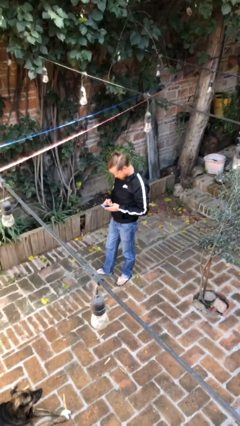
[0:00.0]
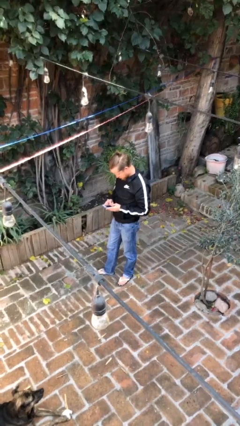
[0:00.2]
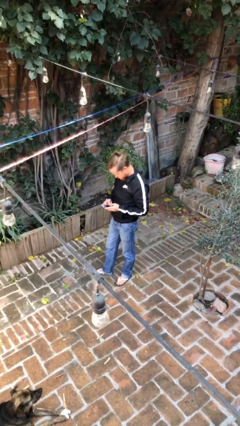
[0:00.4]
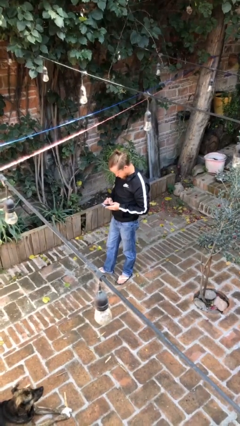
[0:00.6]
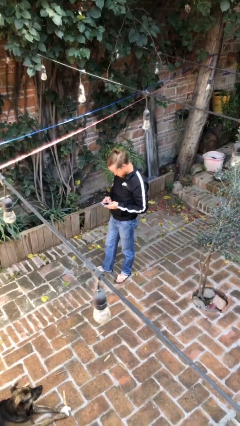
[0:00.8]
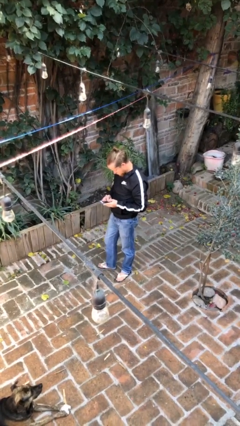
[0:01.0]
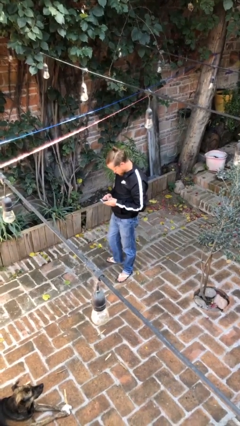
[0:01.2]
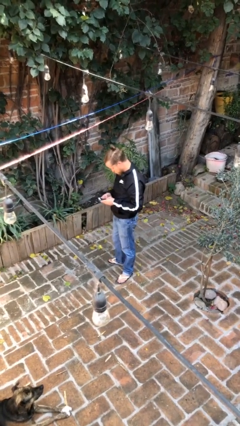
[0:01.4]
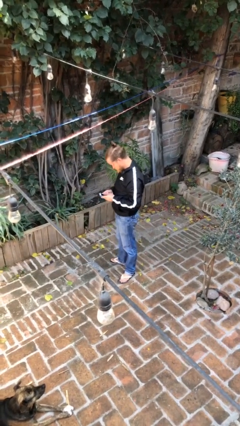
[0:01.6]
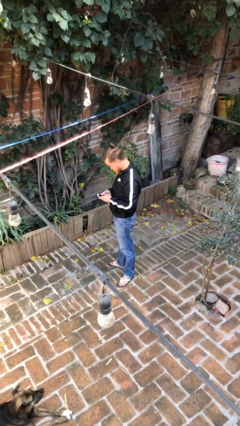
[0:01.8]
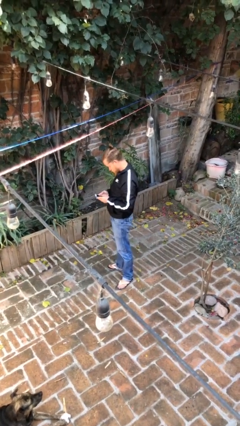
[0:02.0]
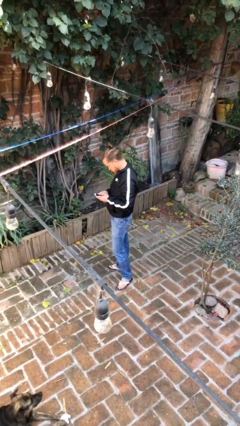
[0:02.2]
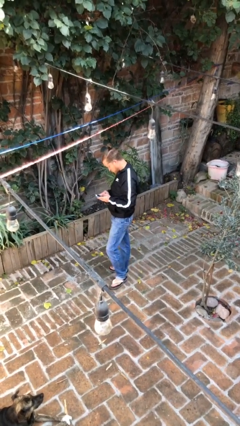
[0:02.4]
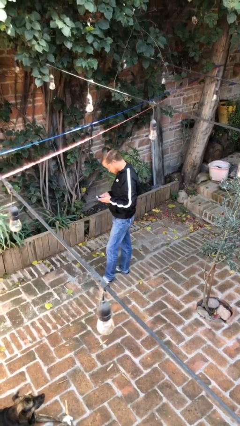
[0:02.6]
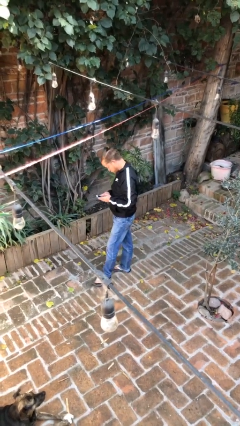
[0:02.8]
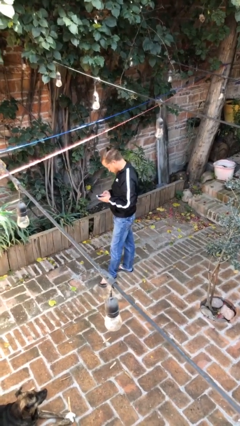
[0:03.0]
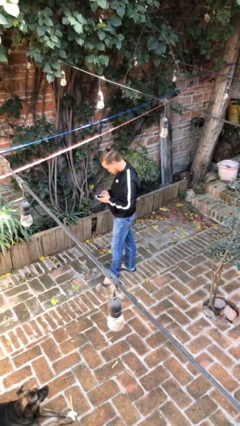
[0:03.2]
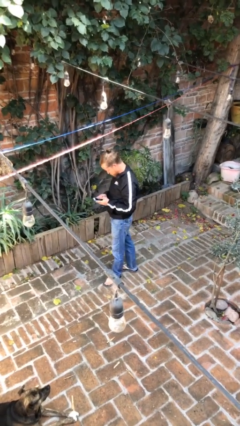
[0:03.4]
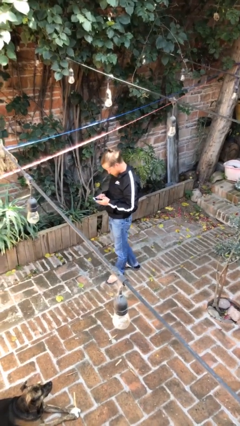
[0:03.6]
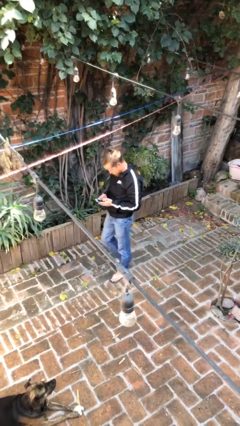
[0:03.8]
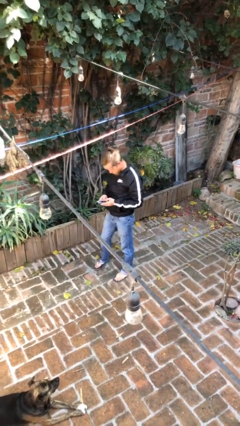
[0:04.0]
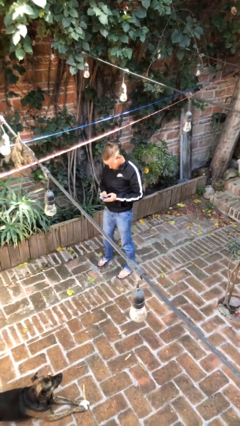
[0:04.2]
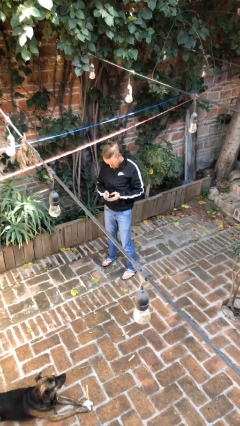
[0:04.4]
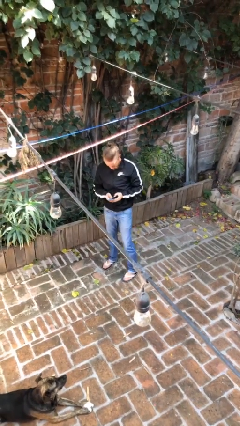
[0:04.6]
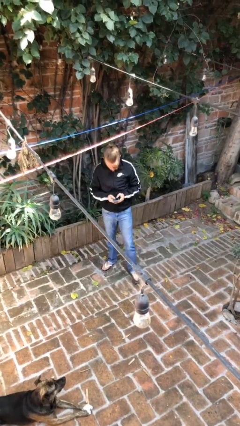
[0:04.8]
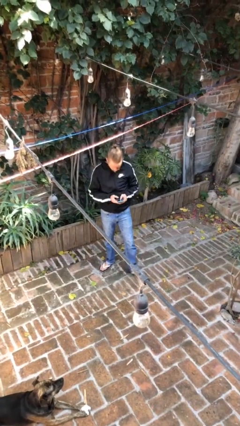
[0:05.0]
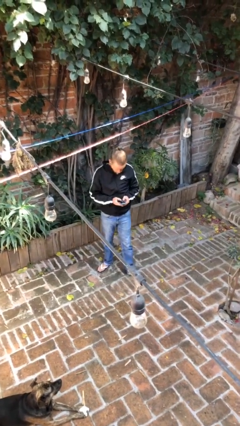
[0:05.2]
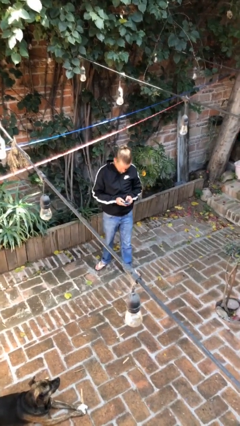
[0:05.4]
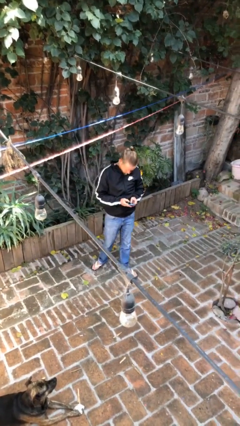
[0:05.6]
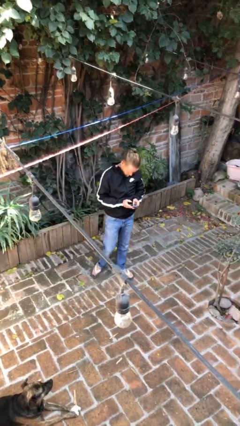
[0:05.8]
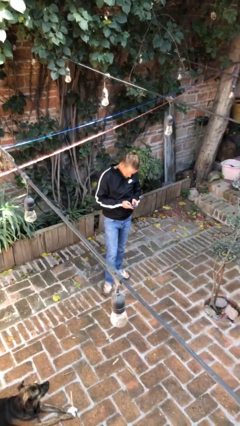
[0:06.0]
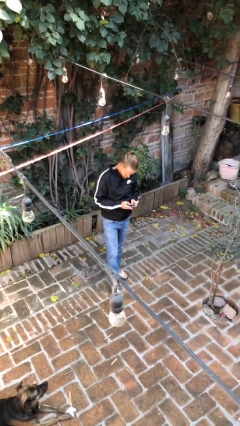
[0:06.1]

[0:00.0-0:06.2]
person texts on phone

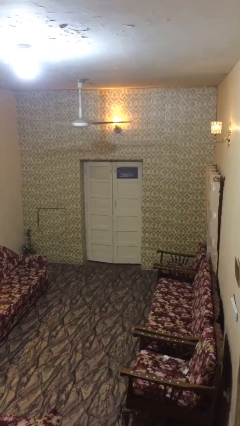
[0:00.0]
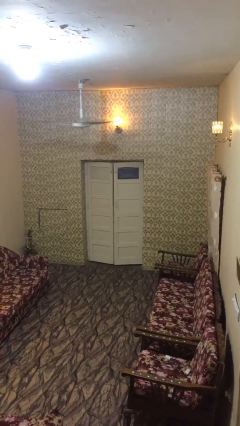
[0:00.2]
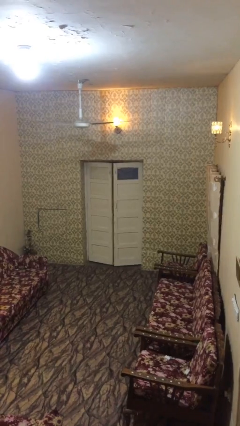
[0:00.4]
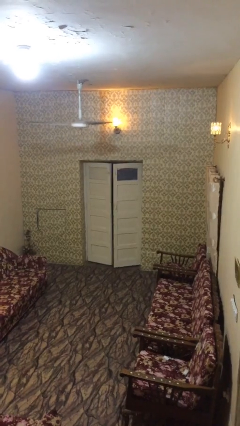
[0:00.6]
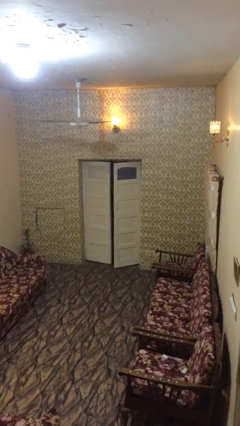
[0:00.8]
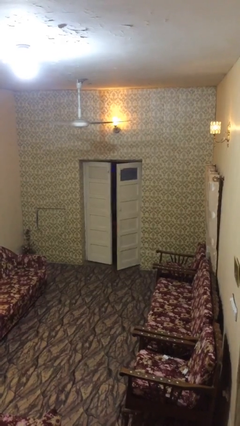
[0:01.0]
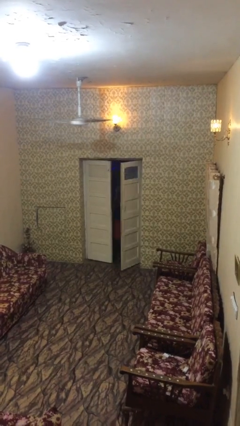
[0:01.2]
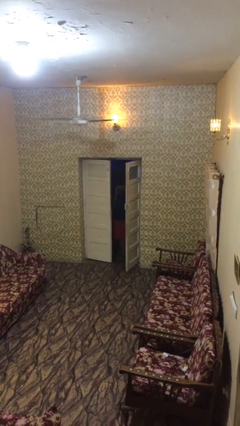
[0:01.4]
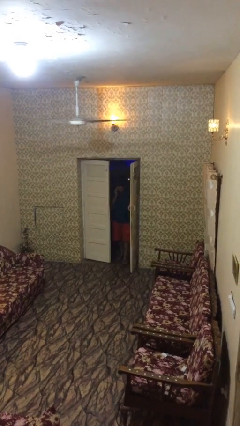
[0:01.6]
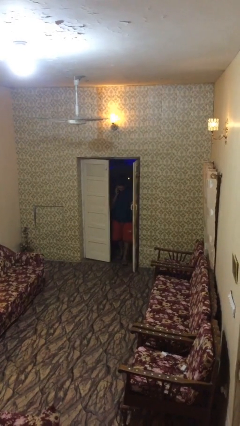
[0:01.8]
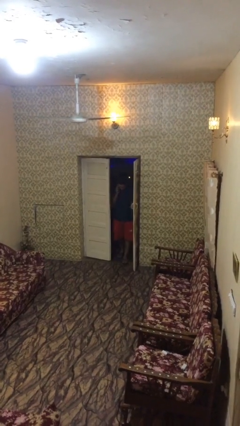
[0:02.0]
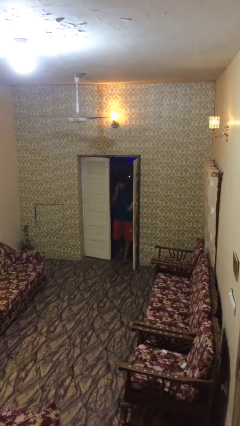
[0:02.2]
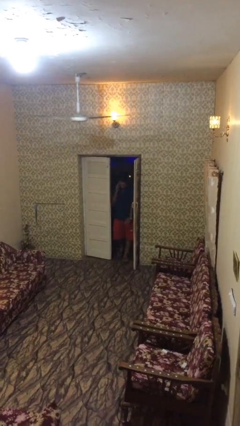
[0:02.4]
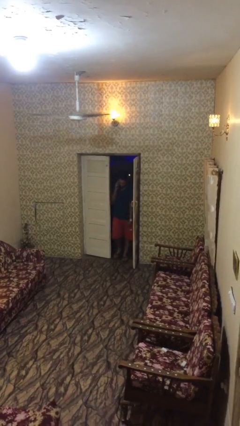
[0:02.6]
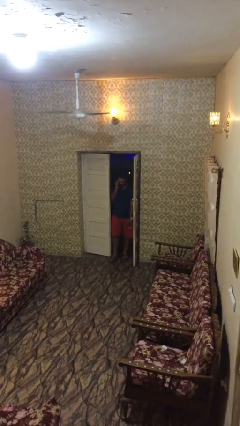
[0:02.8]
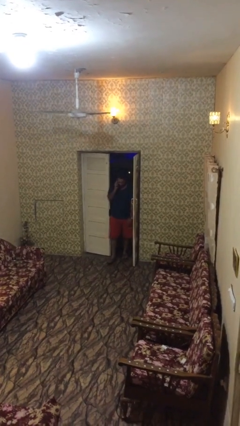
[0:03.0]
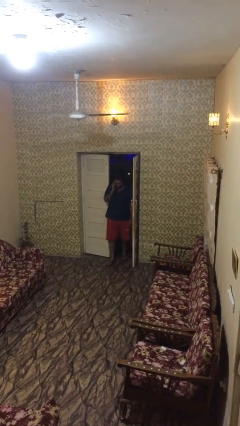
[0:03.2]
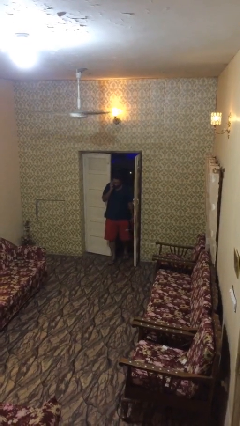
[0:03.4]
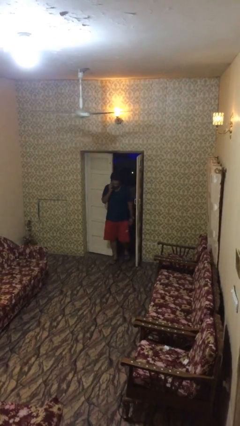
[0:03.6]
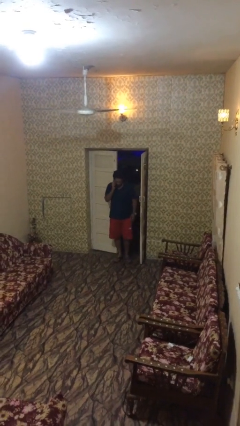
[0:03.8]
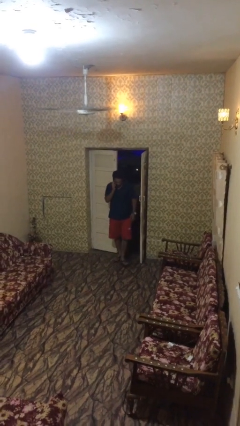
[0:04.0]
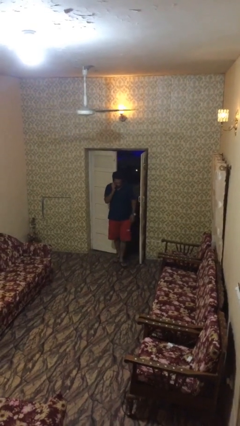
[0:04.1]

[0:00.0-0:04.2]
person opens facility door

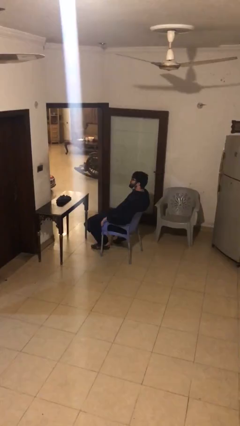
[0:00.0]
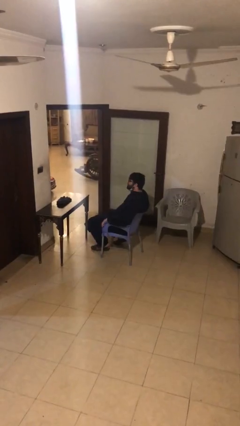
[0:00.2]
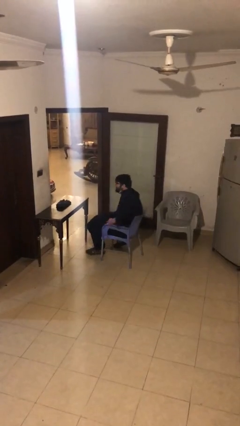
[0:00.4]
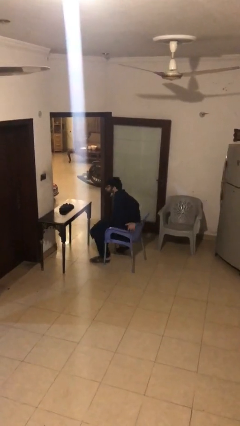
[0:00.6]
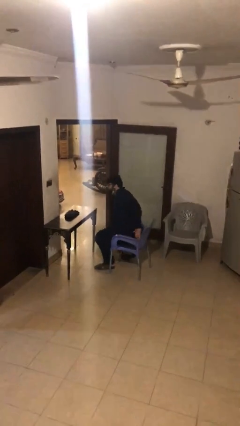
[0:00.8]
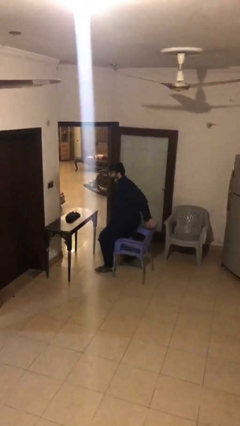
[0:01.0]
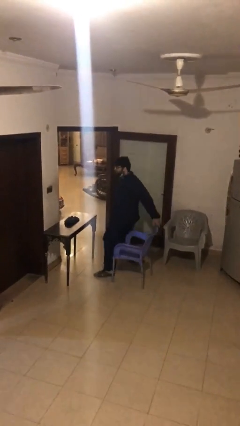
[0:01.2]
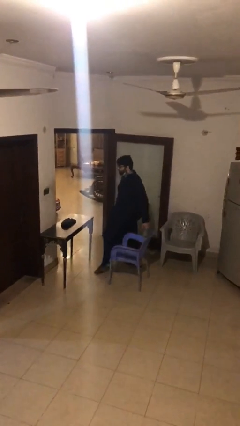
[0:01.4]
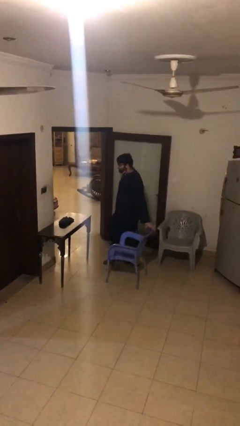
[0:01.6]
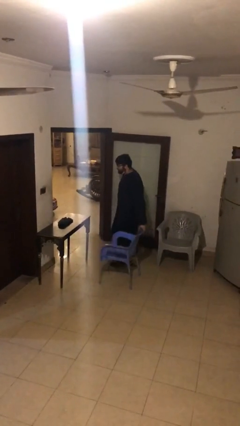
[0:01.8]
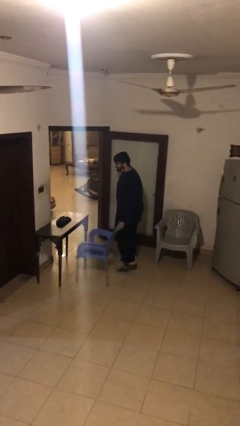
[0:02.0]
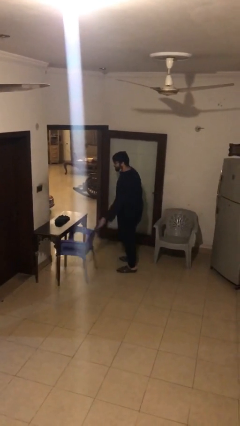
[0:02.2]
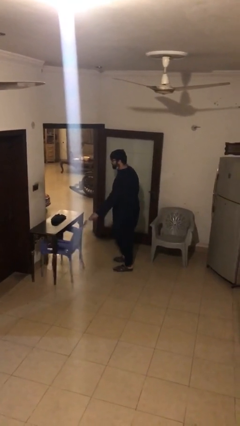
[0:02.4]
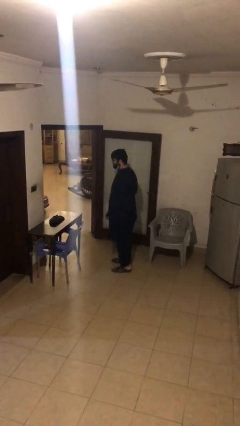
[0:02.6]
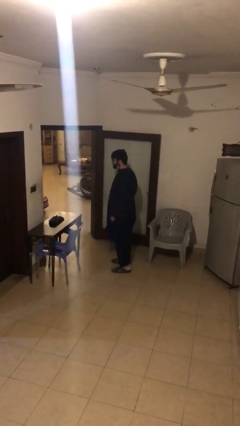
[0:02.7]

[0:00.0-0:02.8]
person stands up

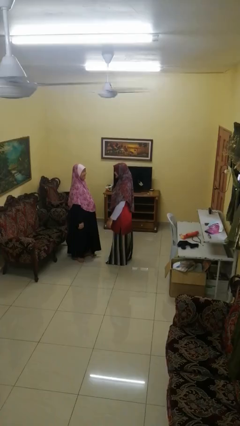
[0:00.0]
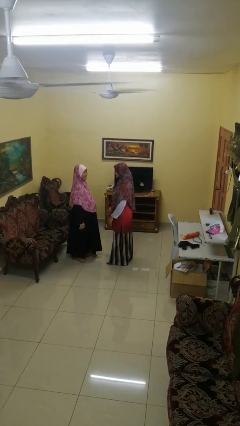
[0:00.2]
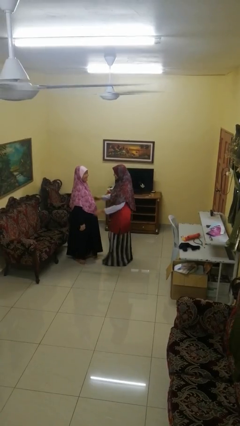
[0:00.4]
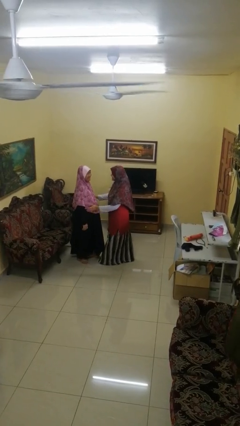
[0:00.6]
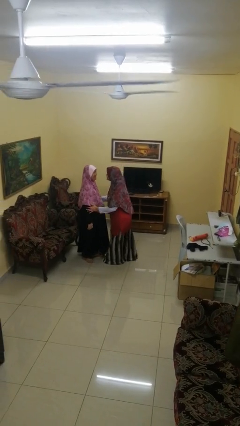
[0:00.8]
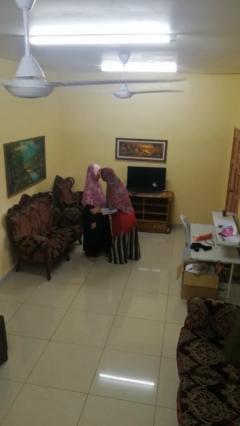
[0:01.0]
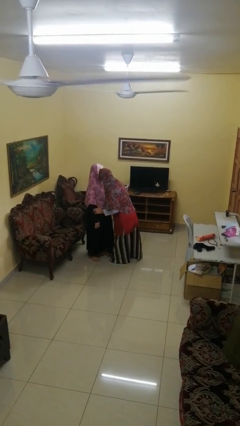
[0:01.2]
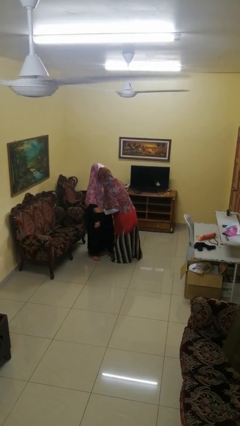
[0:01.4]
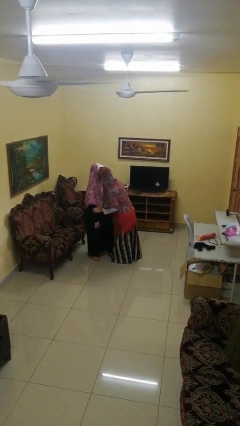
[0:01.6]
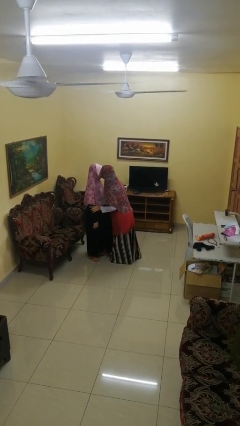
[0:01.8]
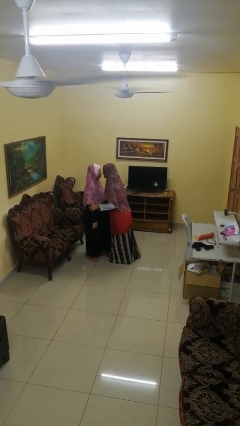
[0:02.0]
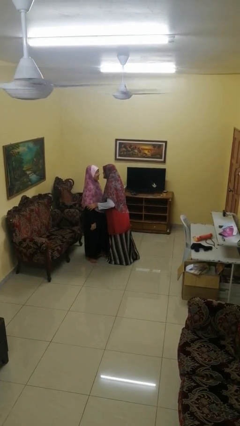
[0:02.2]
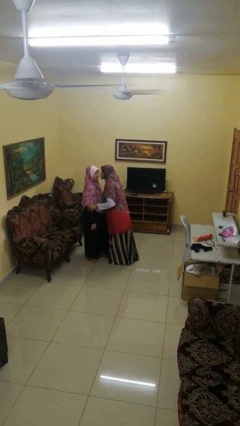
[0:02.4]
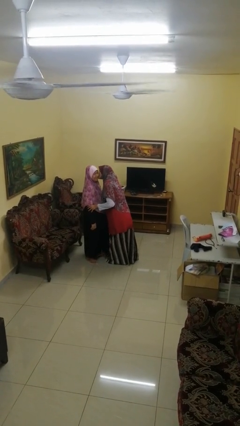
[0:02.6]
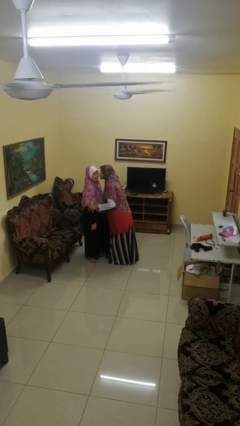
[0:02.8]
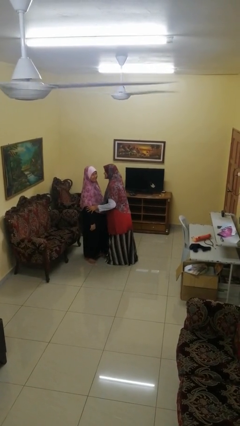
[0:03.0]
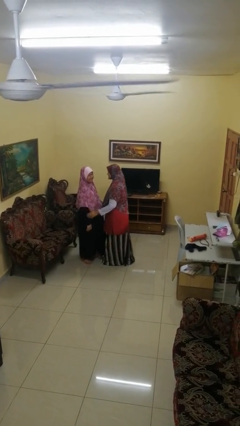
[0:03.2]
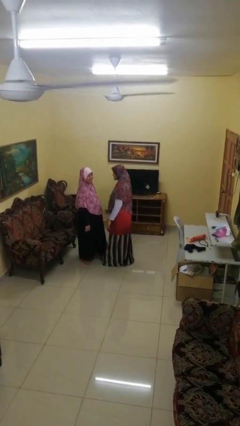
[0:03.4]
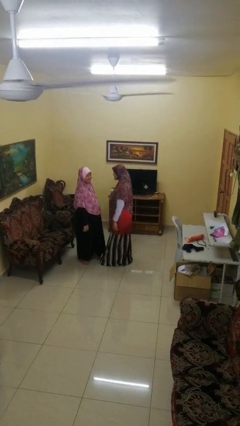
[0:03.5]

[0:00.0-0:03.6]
person kisses cheek of person

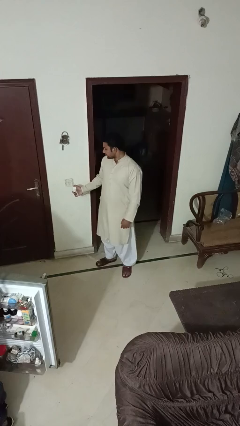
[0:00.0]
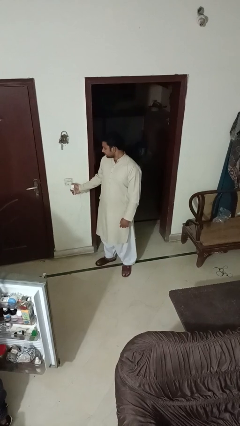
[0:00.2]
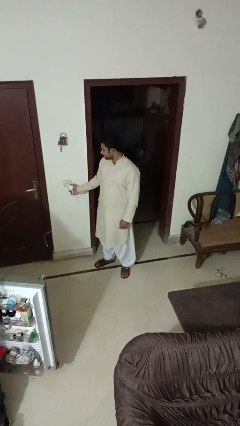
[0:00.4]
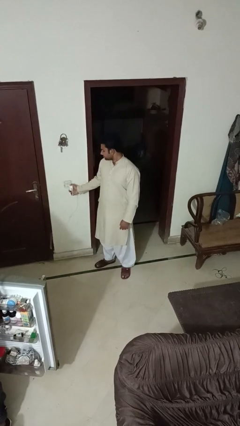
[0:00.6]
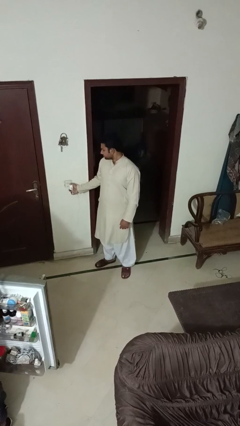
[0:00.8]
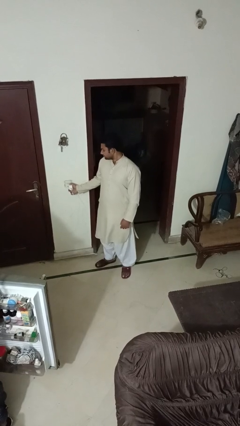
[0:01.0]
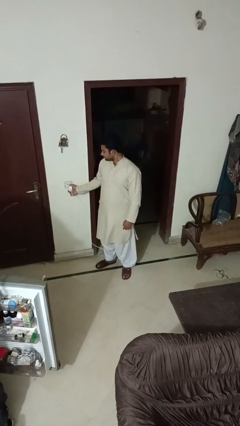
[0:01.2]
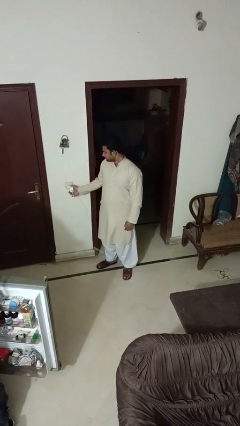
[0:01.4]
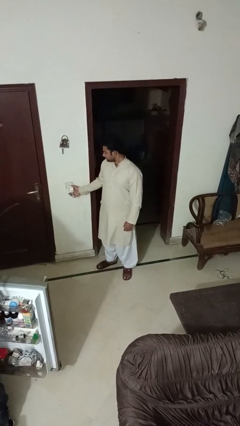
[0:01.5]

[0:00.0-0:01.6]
person plugs into electrical socket
